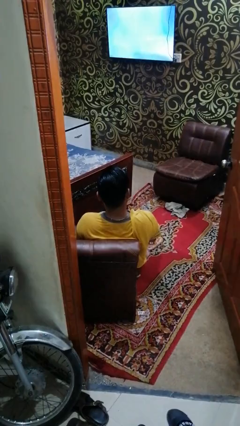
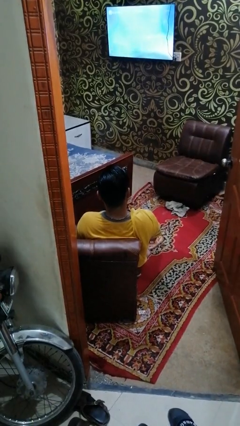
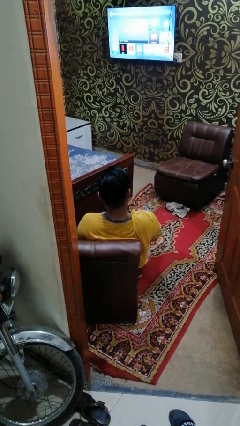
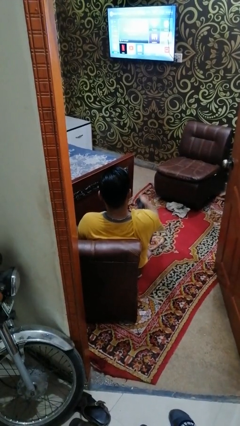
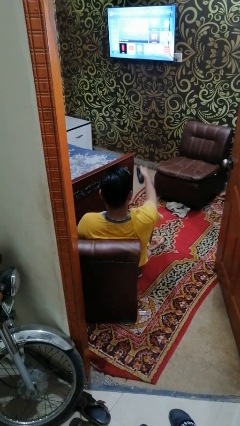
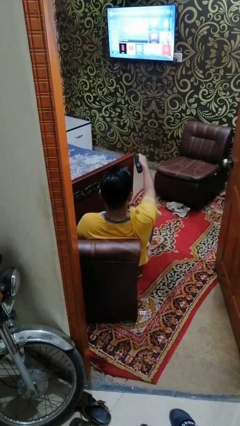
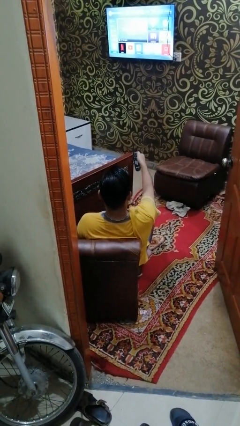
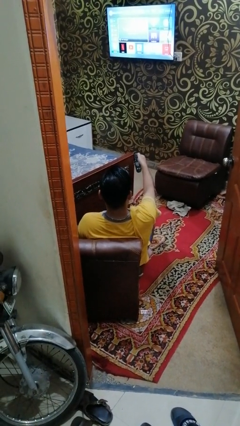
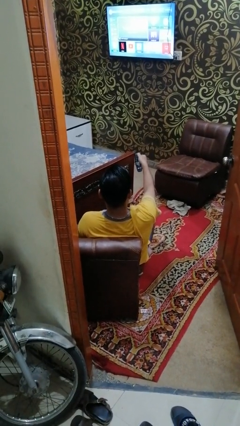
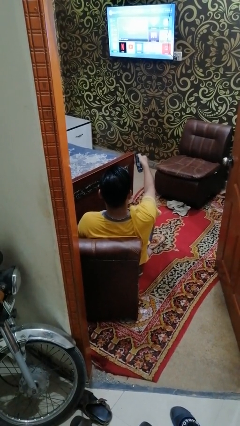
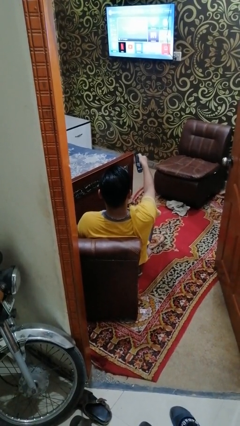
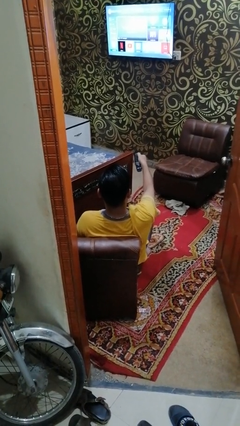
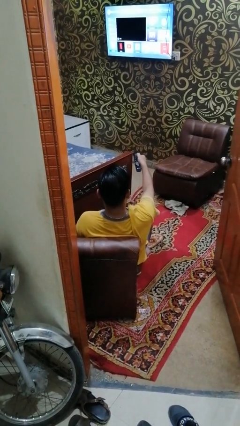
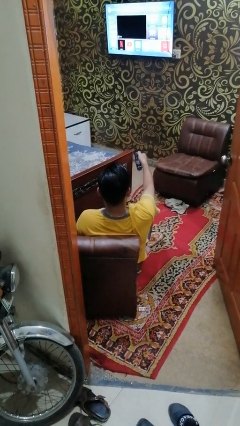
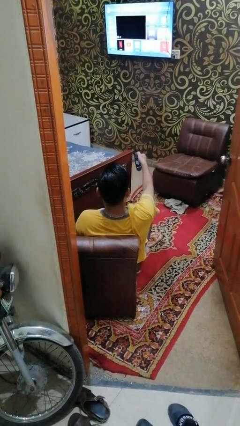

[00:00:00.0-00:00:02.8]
person uses television remote

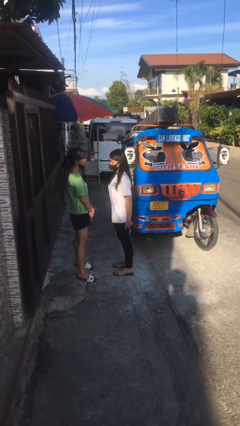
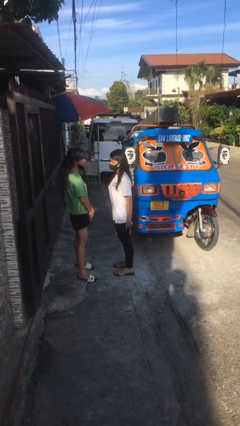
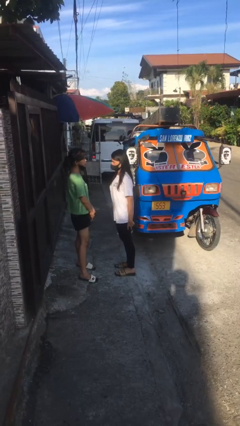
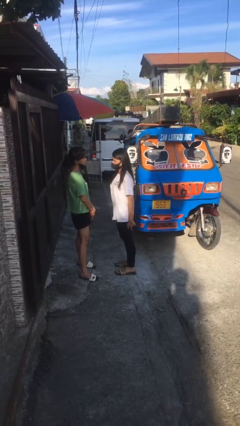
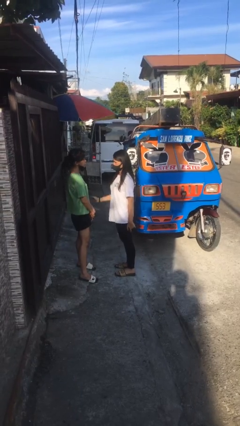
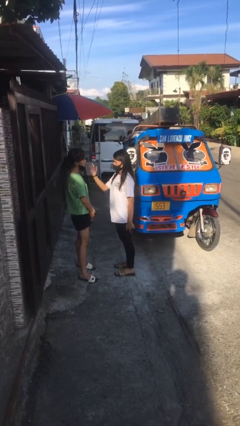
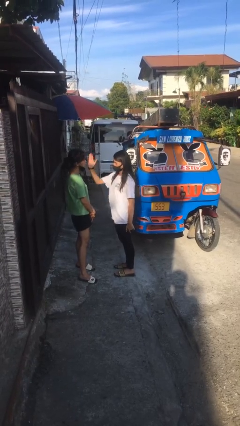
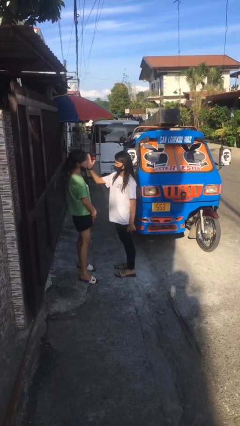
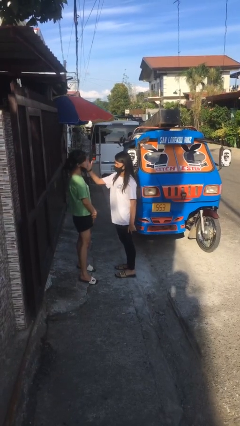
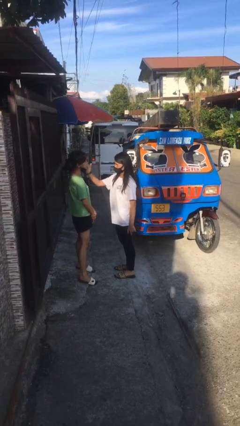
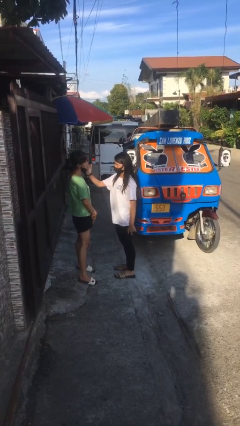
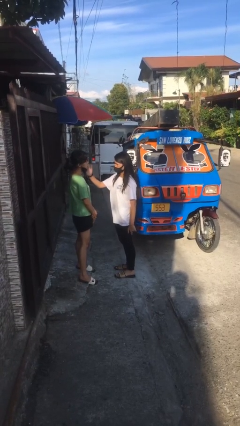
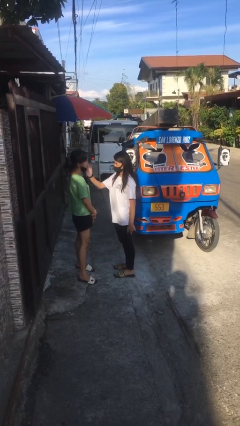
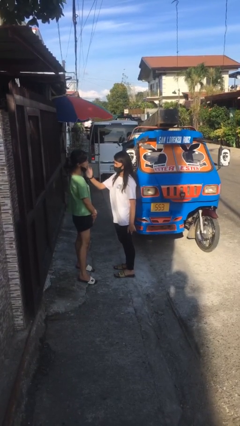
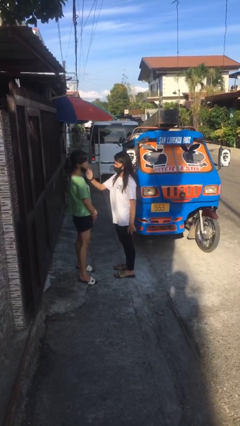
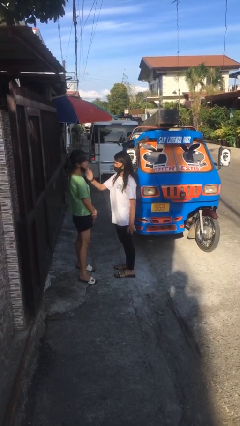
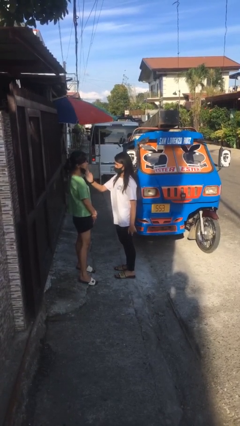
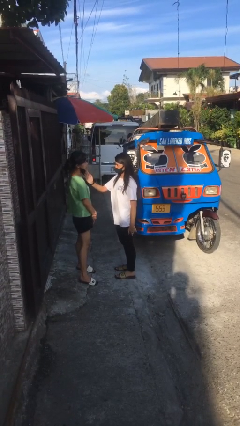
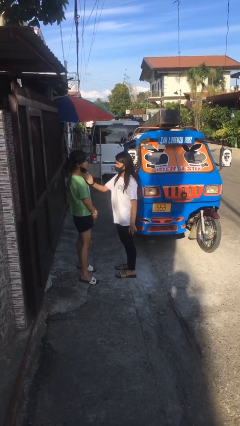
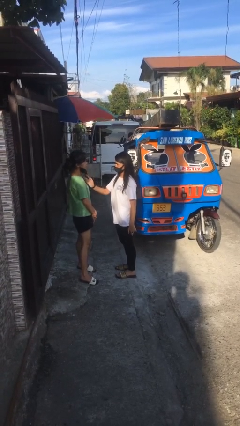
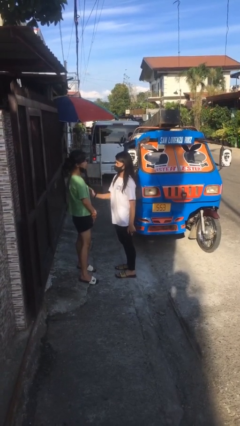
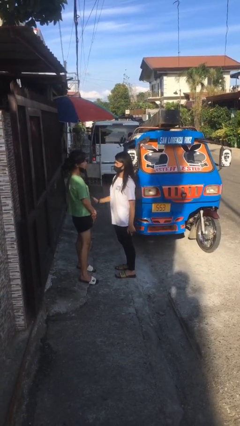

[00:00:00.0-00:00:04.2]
person touches face of person

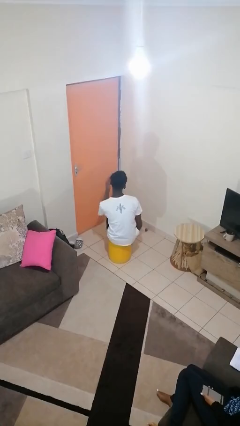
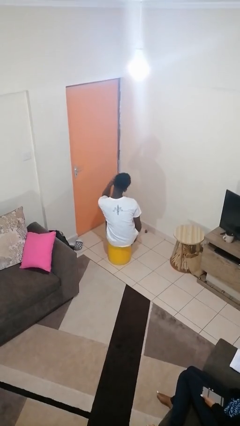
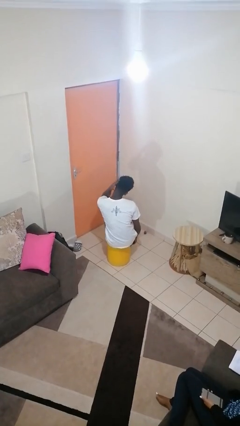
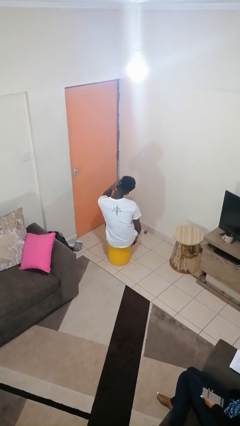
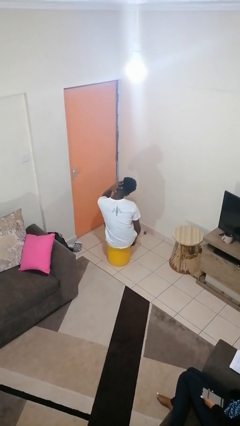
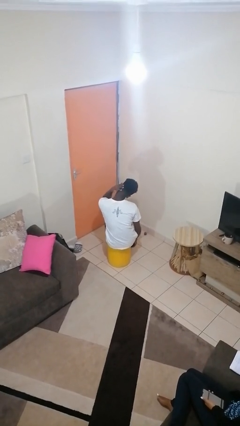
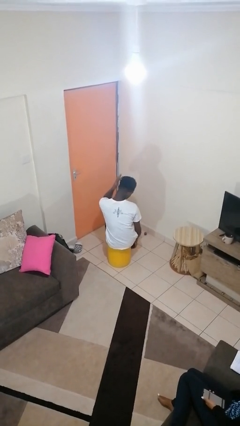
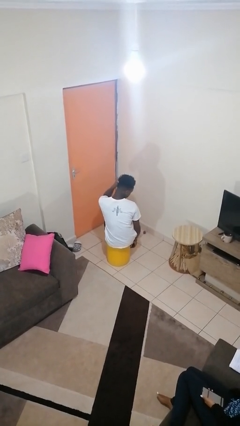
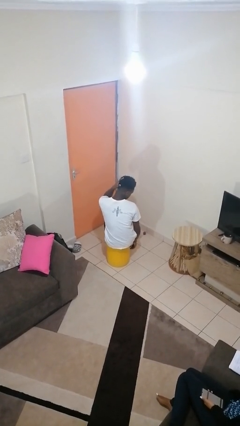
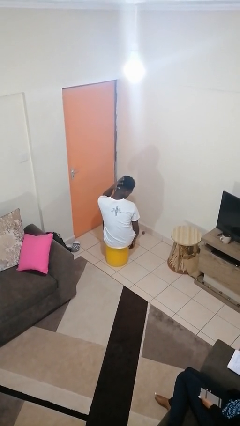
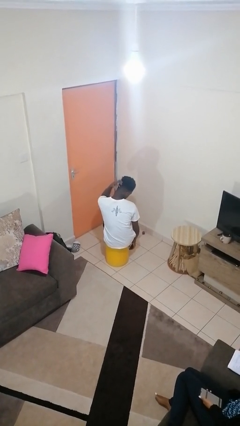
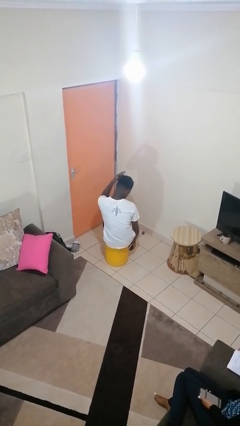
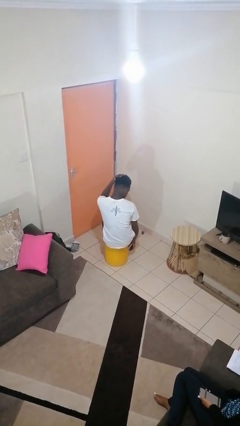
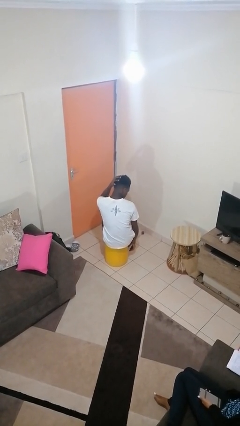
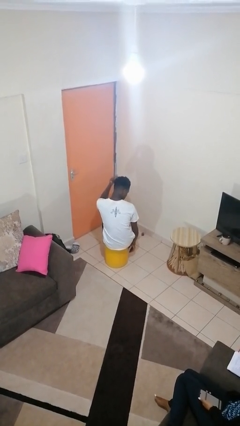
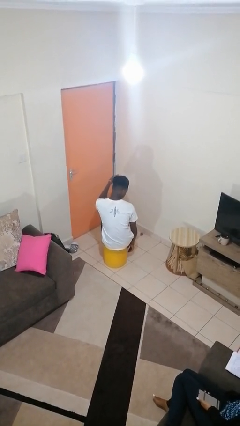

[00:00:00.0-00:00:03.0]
person strokes hair

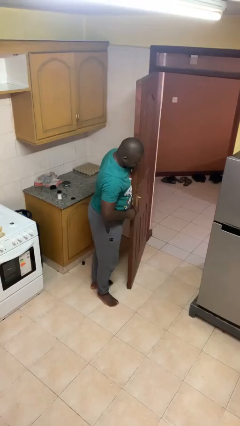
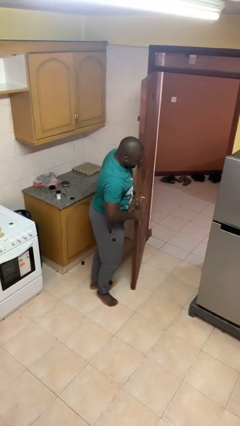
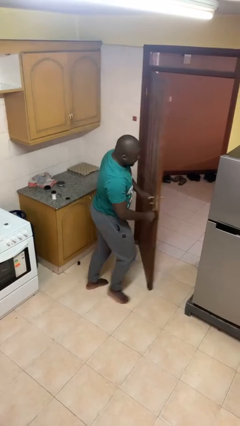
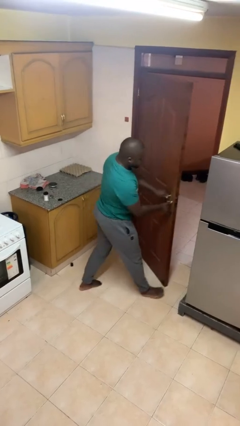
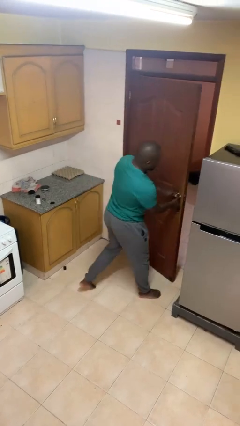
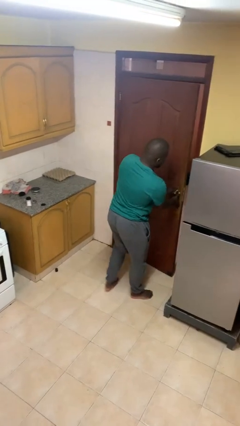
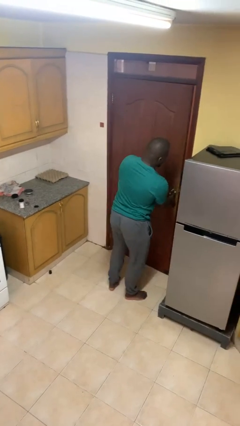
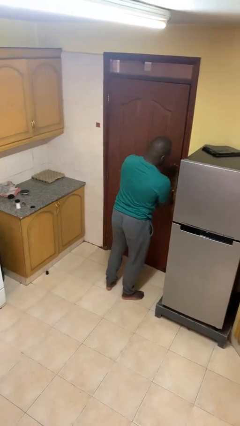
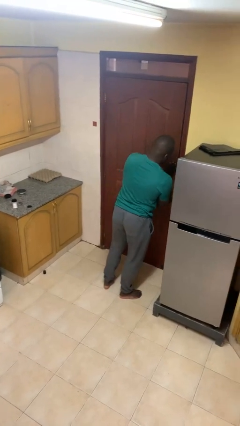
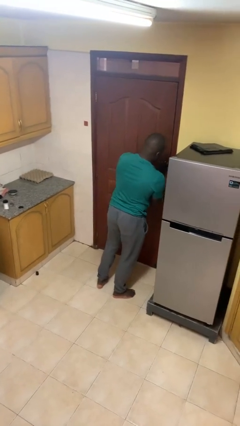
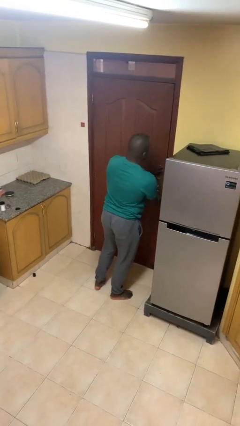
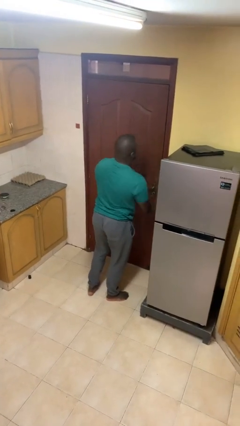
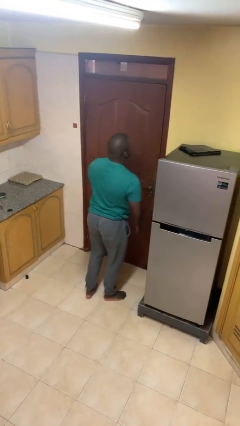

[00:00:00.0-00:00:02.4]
person closes facility door

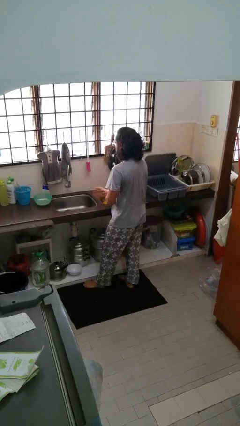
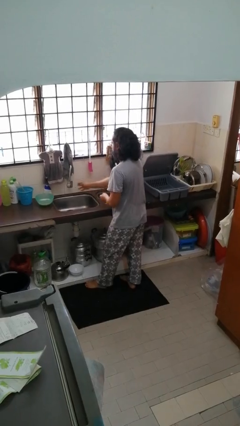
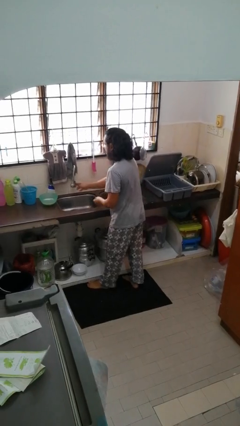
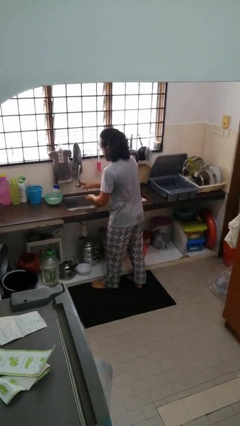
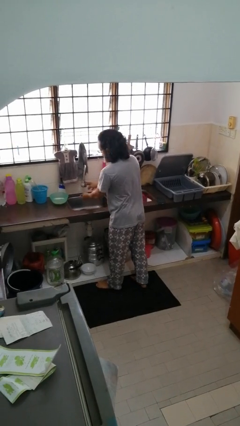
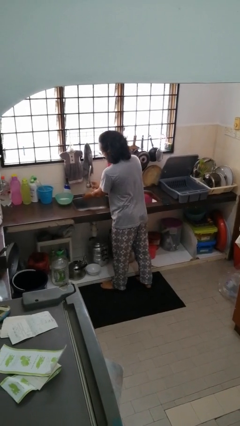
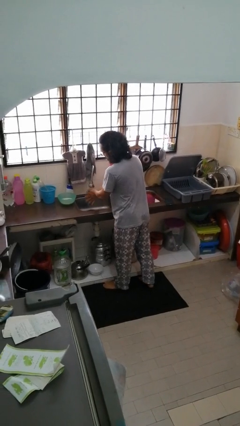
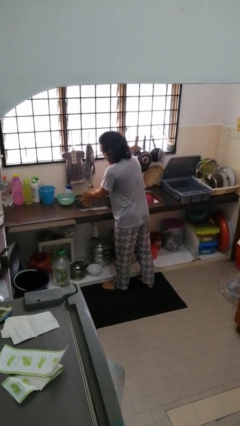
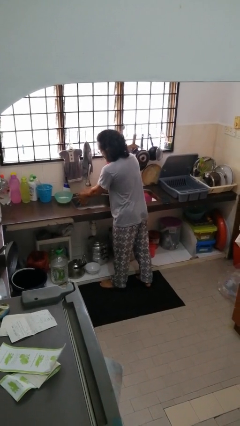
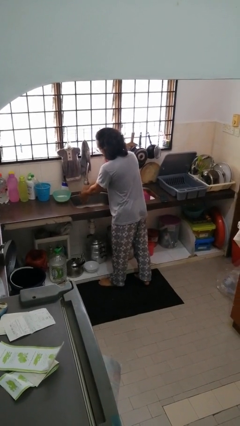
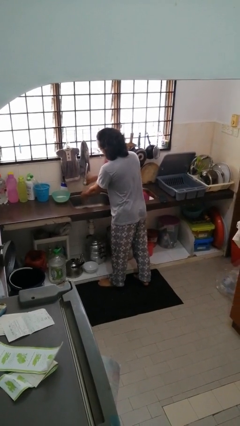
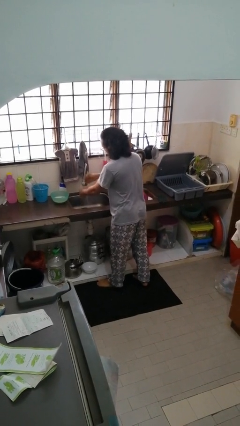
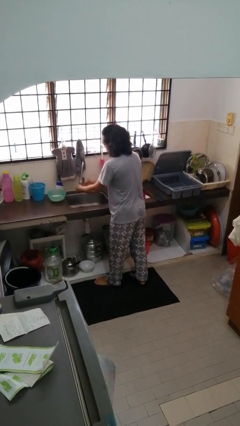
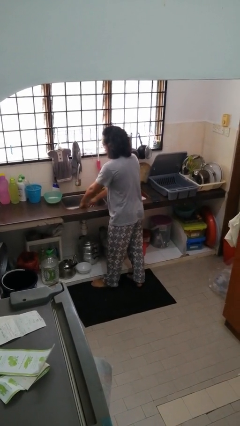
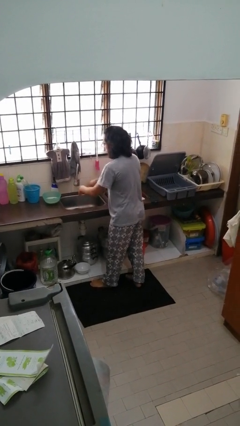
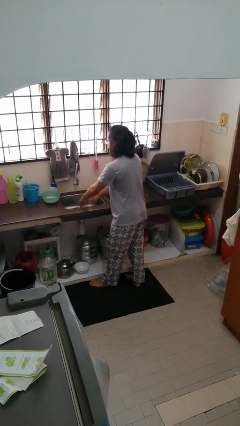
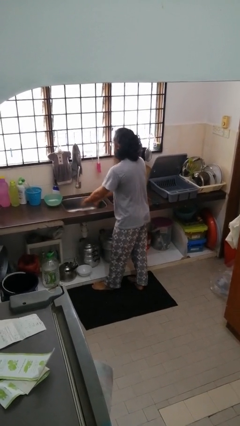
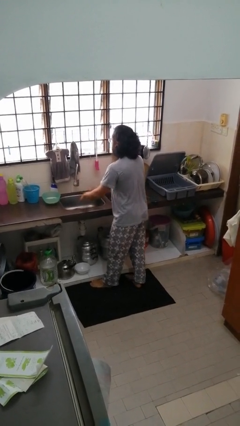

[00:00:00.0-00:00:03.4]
person washes hands

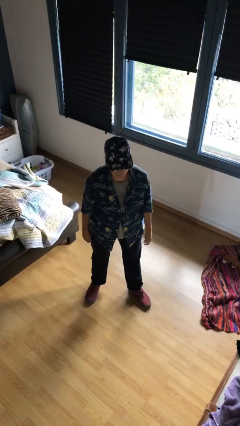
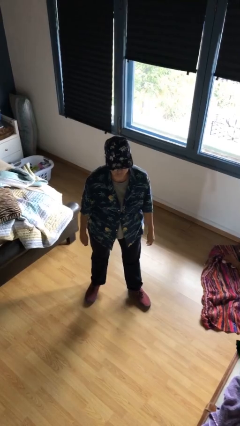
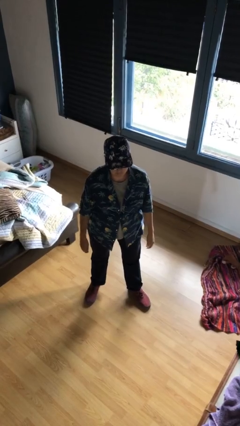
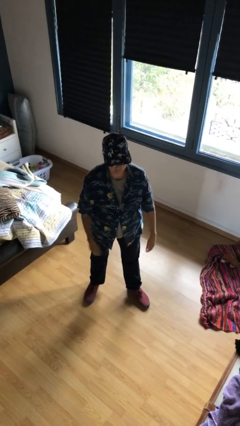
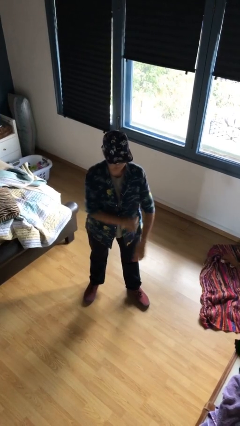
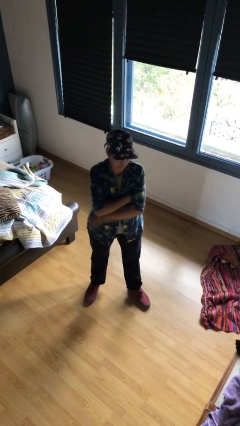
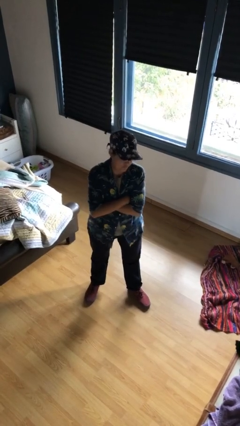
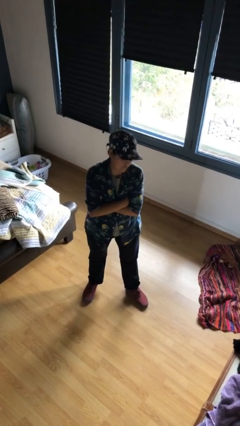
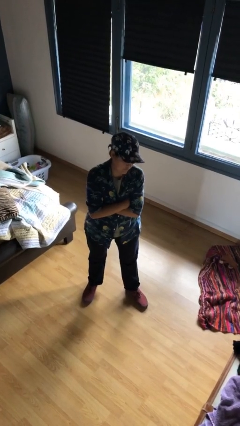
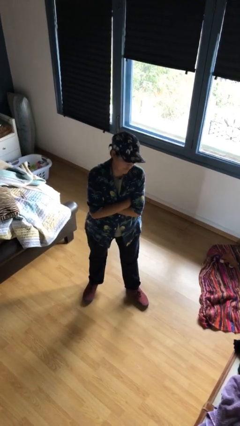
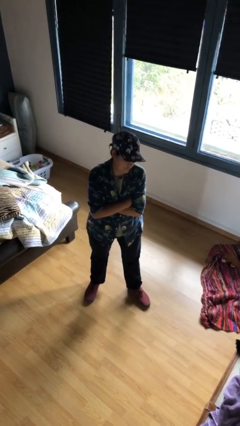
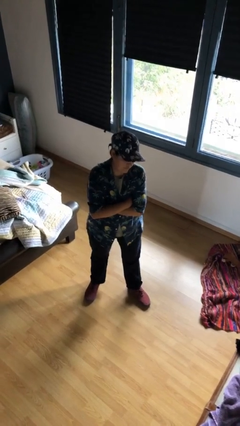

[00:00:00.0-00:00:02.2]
person crosses arms
